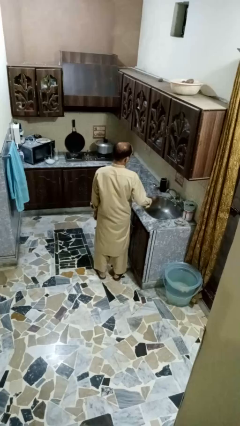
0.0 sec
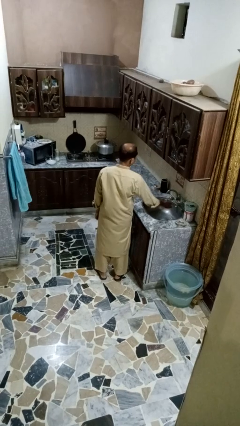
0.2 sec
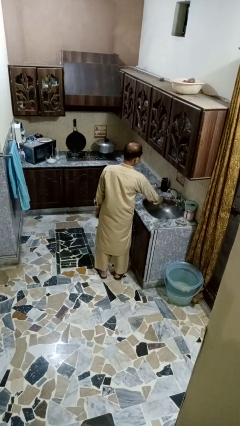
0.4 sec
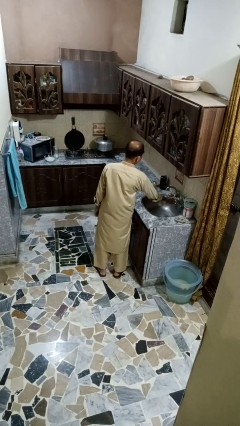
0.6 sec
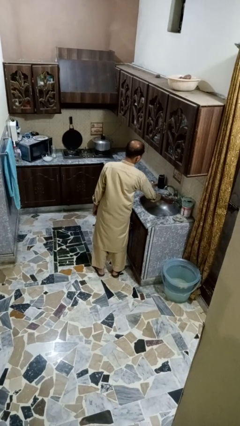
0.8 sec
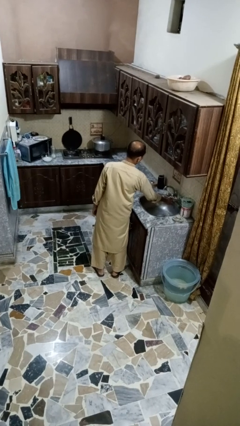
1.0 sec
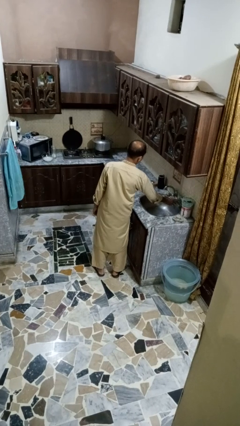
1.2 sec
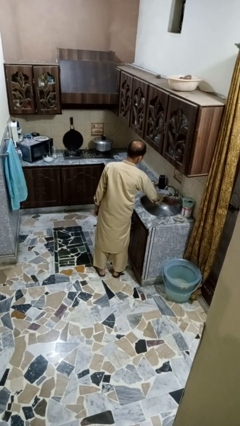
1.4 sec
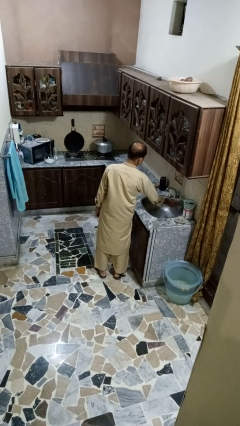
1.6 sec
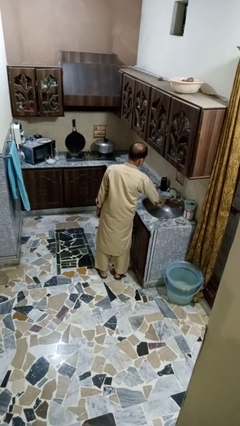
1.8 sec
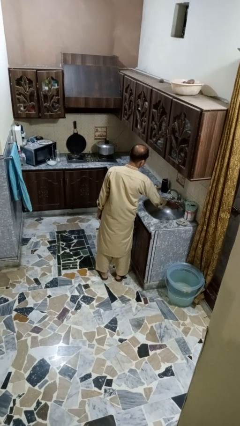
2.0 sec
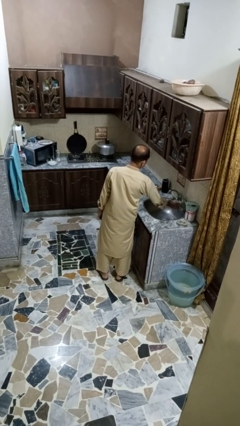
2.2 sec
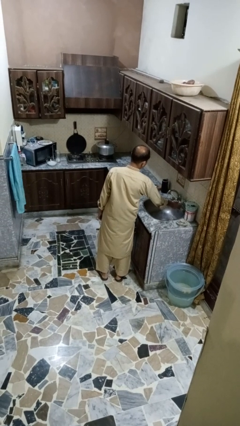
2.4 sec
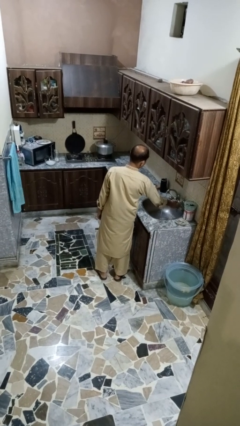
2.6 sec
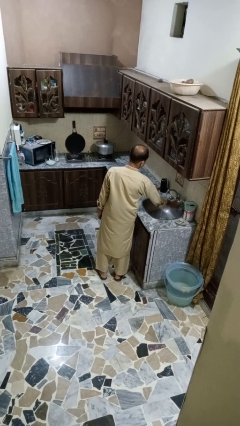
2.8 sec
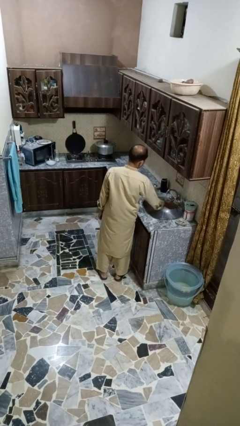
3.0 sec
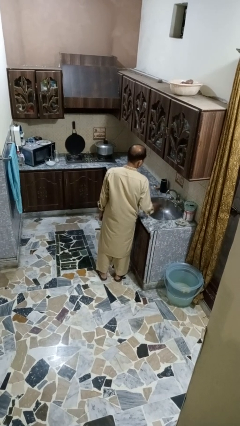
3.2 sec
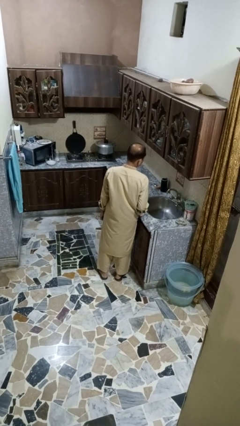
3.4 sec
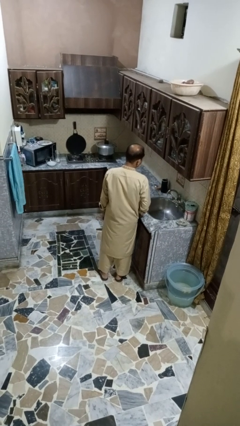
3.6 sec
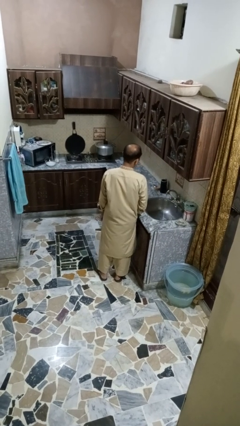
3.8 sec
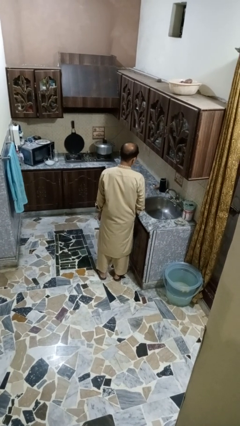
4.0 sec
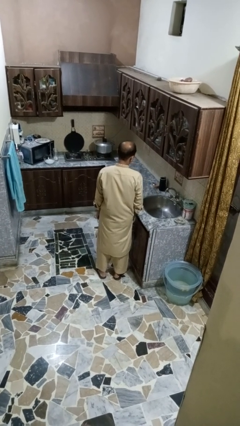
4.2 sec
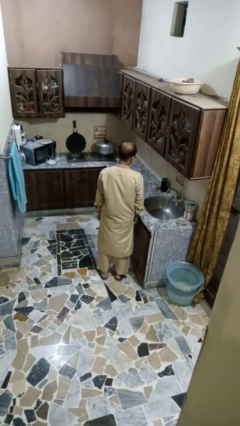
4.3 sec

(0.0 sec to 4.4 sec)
person turns on faucet

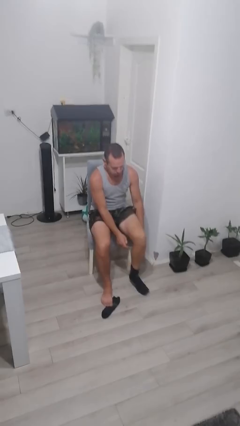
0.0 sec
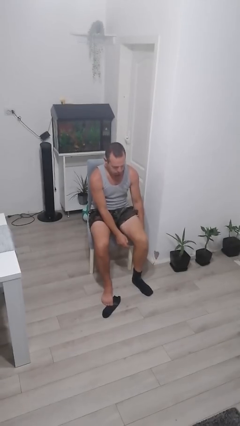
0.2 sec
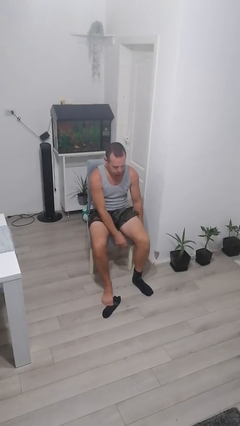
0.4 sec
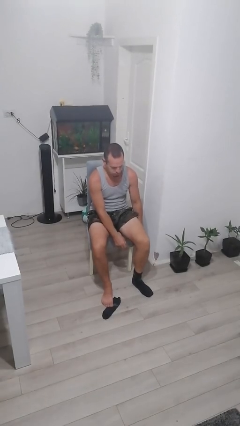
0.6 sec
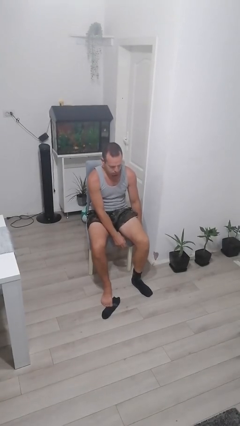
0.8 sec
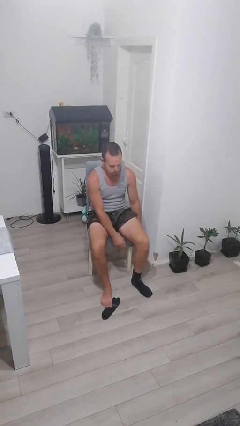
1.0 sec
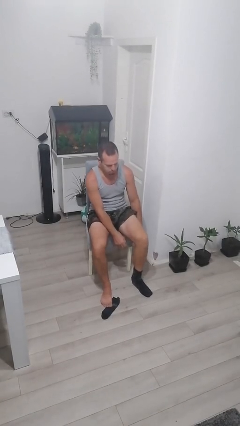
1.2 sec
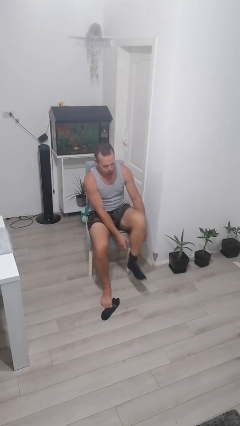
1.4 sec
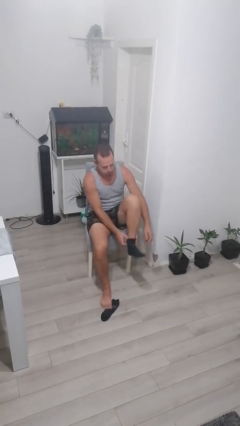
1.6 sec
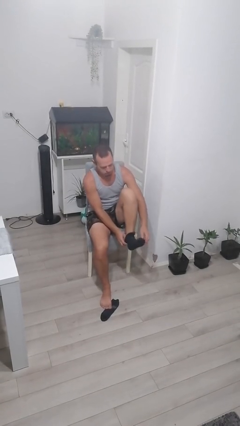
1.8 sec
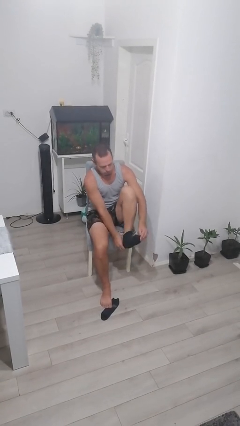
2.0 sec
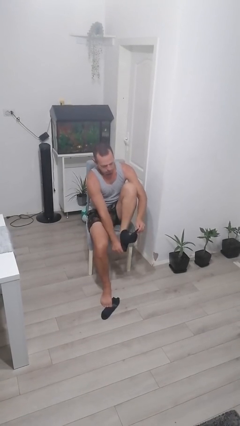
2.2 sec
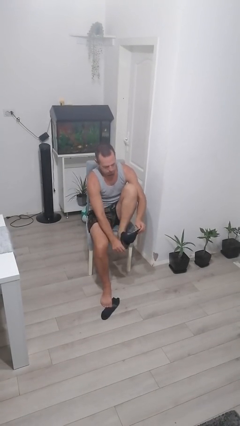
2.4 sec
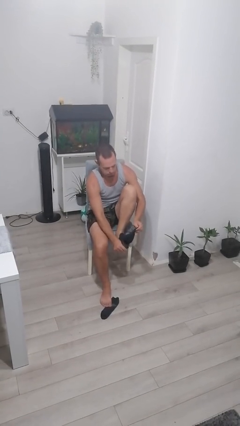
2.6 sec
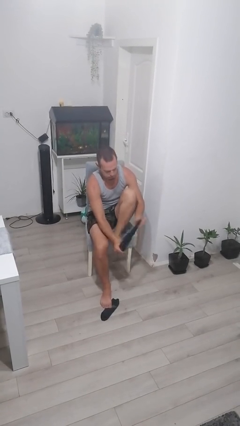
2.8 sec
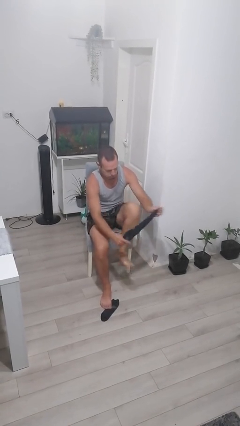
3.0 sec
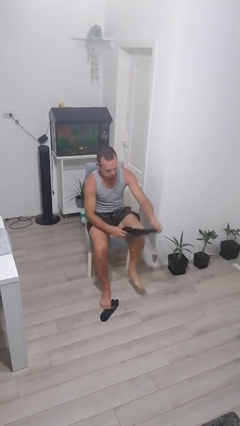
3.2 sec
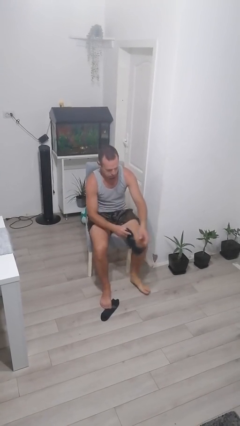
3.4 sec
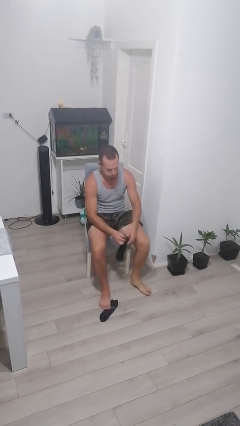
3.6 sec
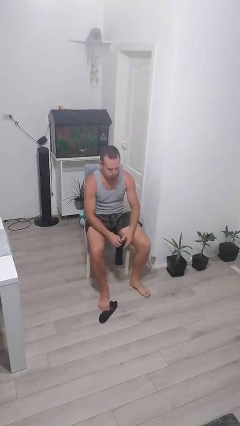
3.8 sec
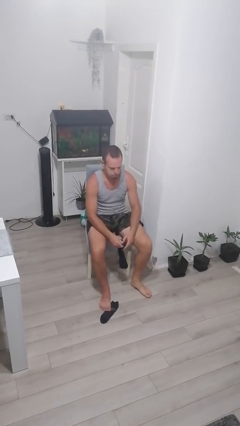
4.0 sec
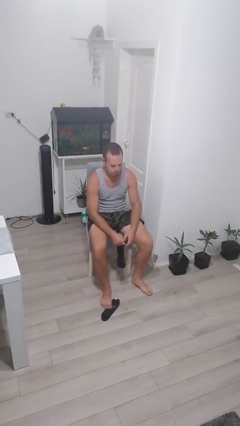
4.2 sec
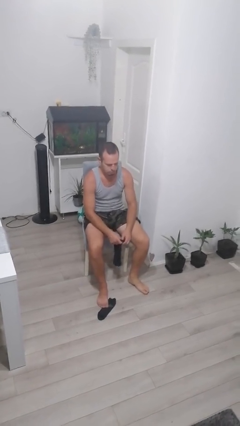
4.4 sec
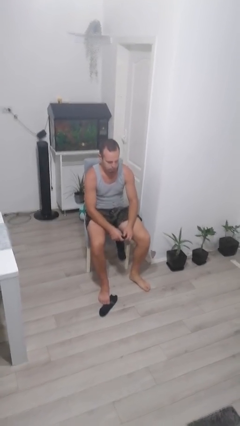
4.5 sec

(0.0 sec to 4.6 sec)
person takes off socks

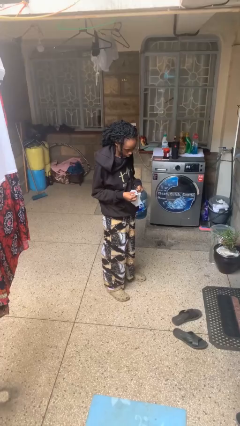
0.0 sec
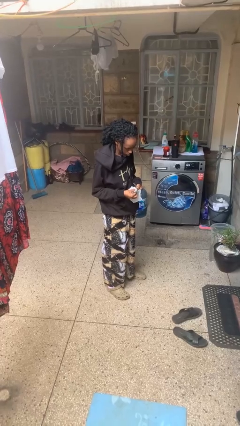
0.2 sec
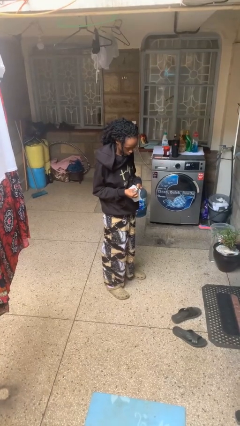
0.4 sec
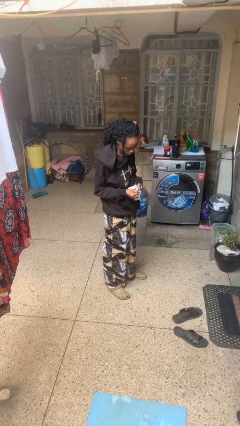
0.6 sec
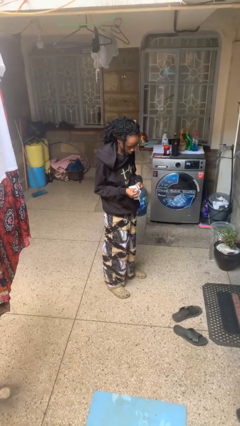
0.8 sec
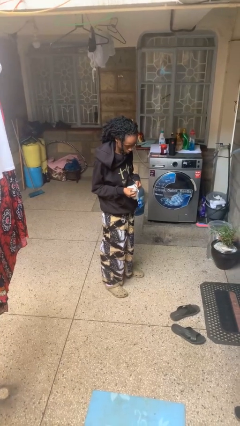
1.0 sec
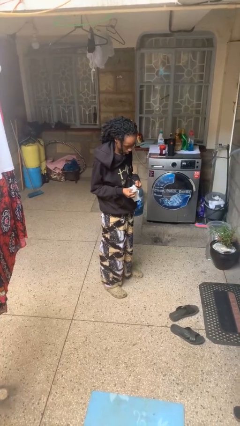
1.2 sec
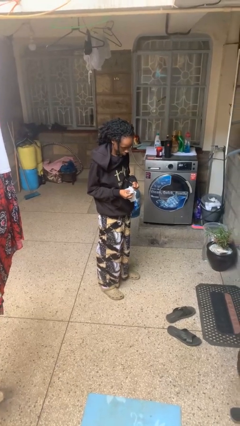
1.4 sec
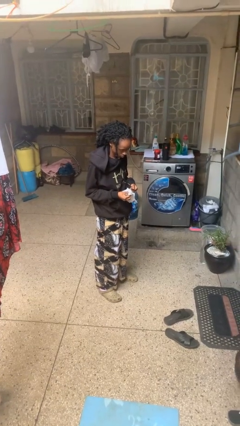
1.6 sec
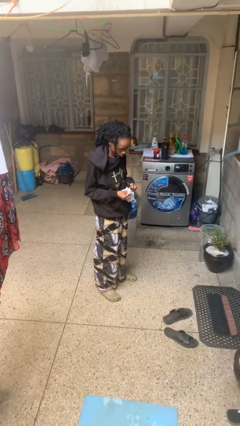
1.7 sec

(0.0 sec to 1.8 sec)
person cleans eyeglasses

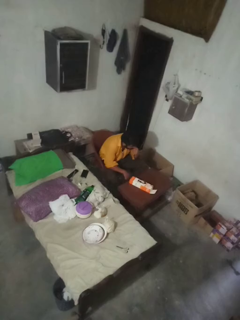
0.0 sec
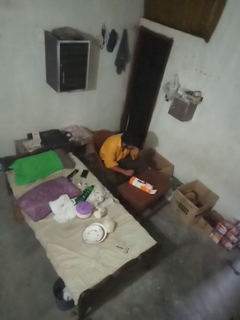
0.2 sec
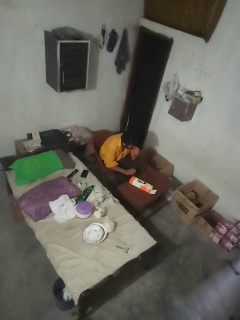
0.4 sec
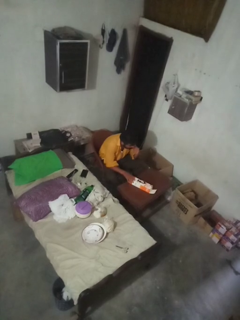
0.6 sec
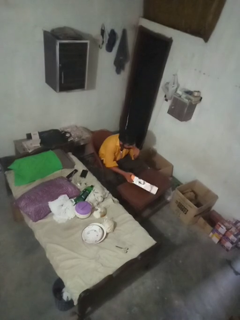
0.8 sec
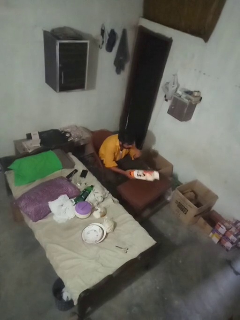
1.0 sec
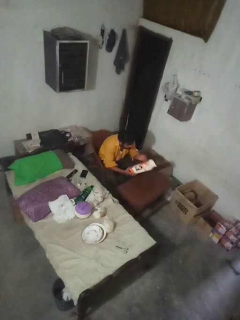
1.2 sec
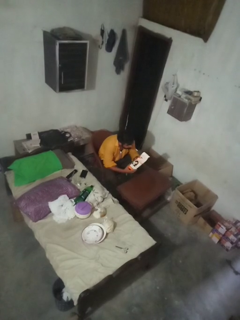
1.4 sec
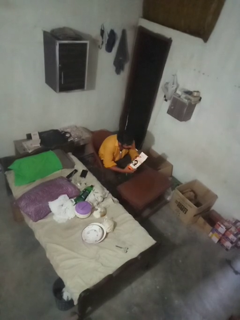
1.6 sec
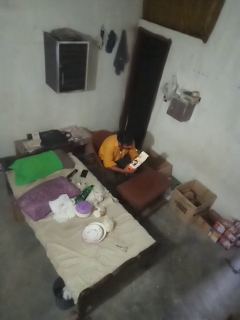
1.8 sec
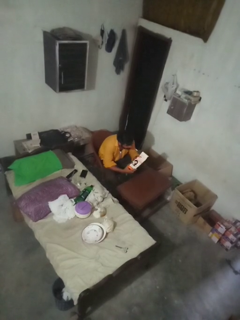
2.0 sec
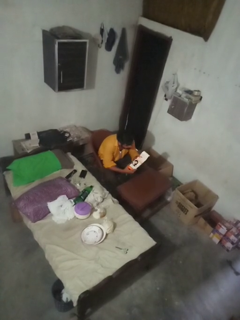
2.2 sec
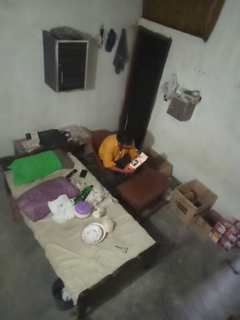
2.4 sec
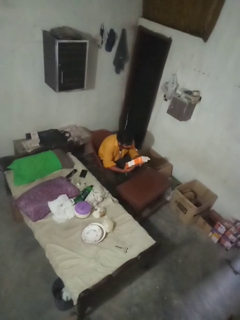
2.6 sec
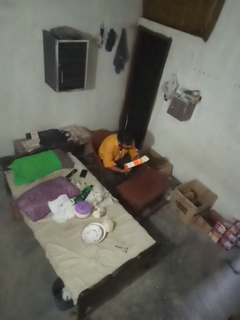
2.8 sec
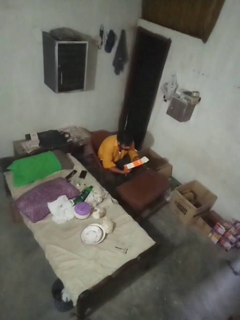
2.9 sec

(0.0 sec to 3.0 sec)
person picks up object from countertop

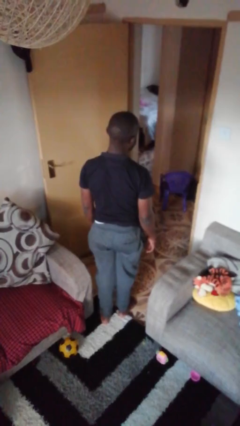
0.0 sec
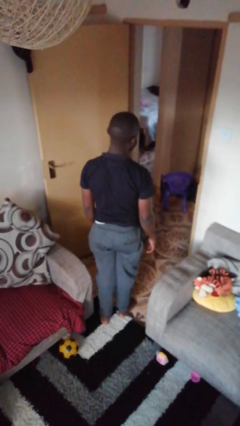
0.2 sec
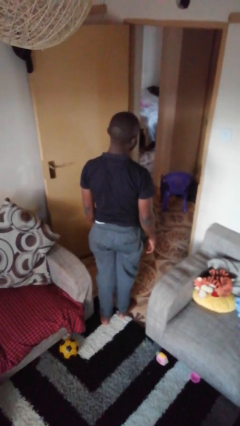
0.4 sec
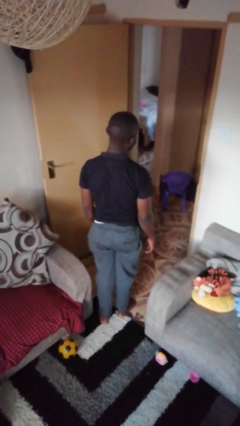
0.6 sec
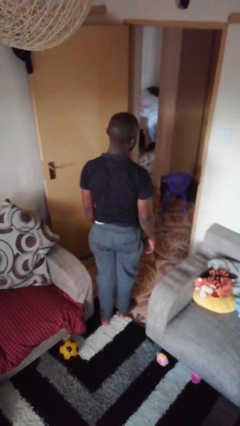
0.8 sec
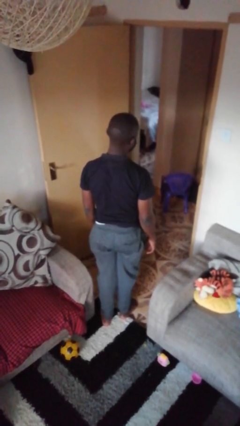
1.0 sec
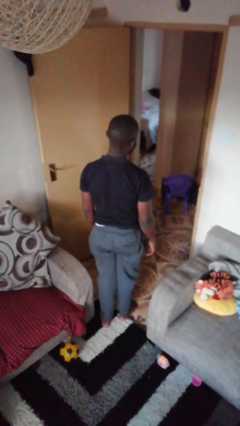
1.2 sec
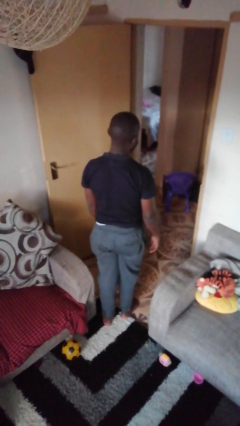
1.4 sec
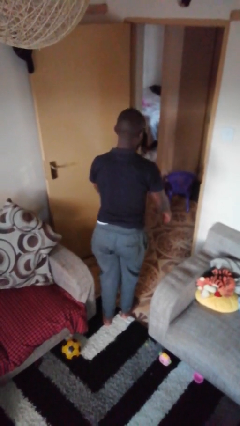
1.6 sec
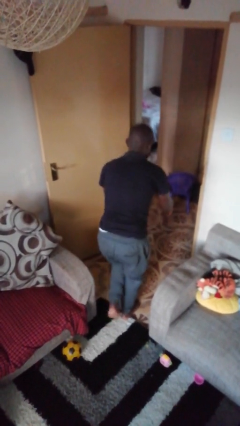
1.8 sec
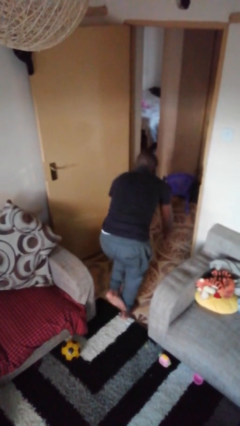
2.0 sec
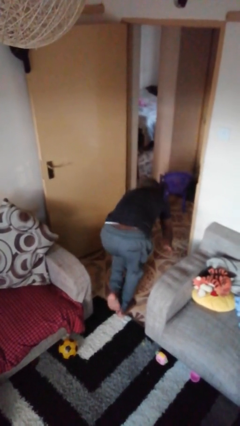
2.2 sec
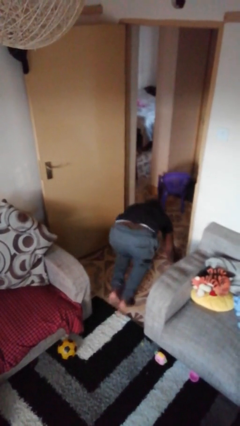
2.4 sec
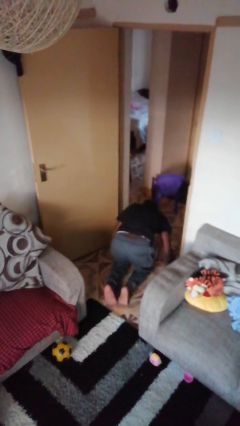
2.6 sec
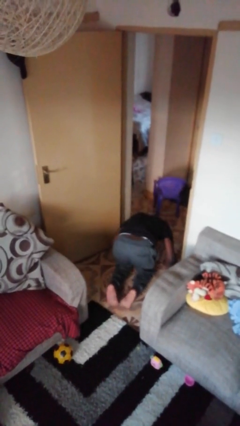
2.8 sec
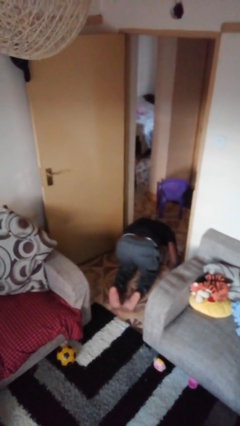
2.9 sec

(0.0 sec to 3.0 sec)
person trips on object on floor

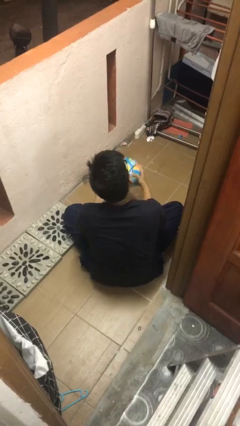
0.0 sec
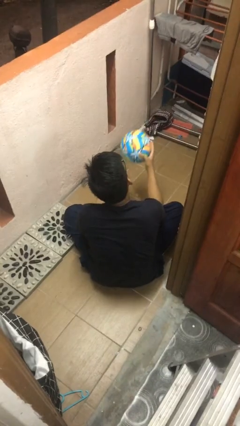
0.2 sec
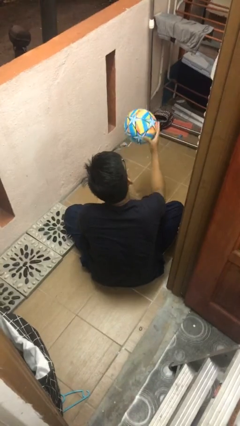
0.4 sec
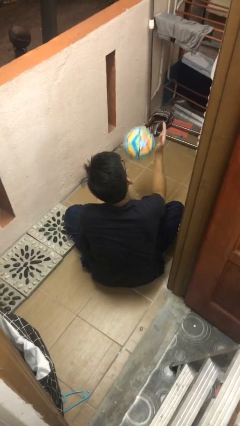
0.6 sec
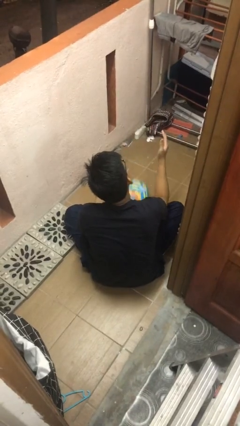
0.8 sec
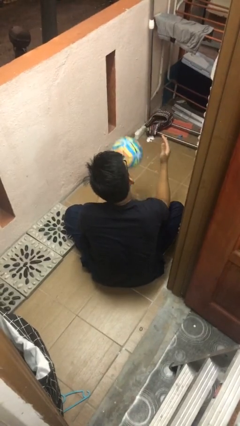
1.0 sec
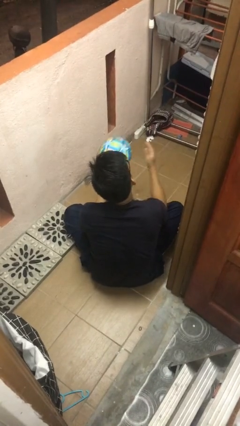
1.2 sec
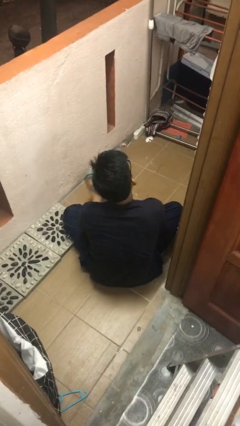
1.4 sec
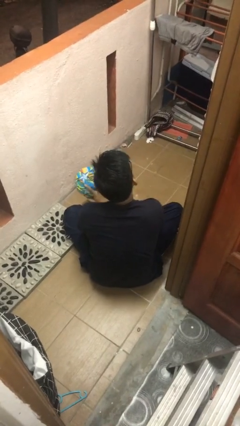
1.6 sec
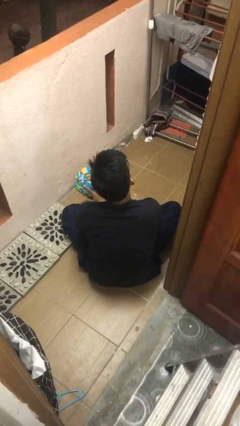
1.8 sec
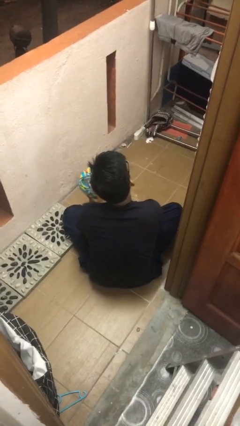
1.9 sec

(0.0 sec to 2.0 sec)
person bounces ball on floor
